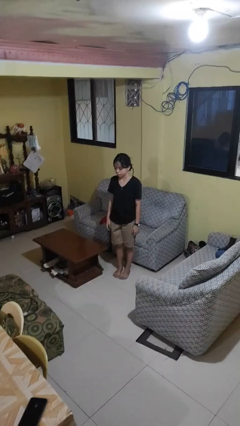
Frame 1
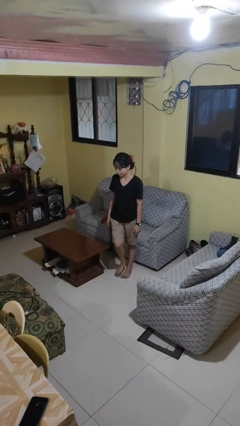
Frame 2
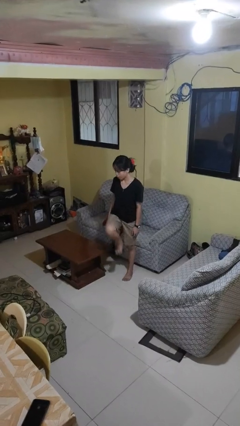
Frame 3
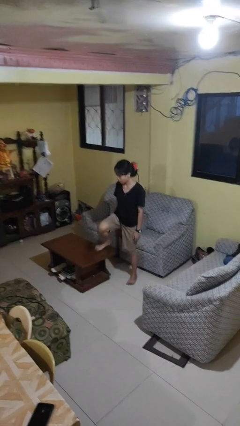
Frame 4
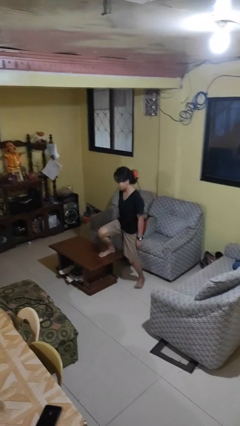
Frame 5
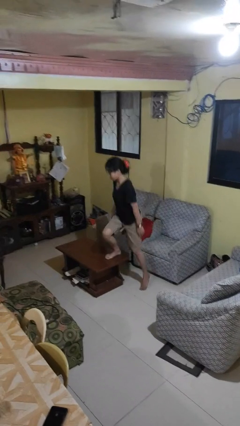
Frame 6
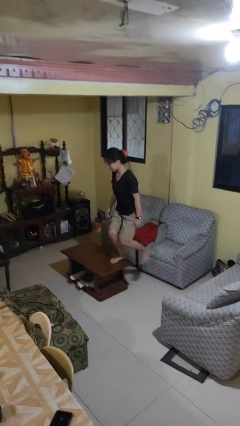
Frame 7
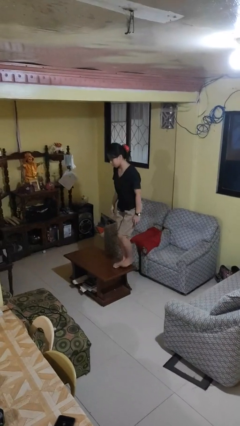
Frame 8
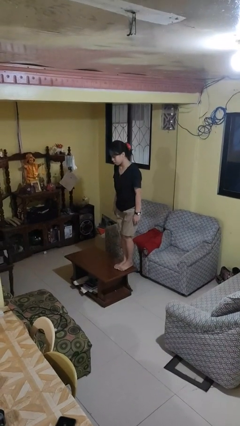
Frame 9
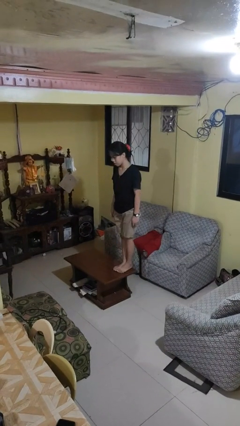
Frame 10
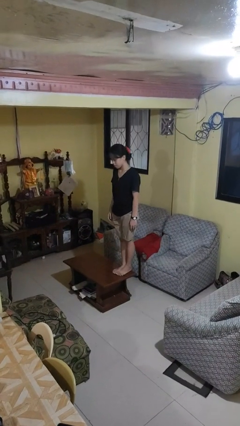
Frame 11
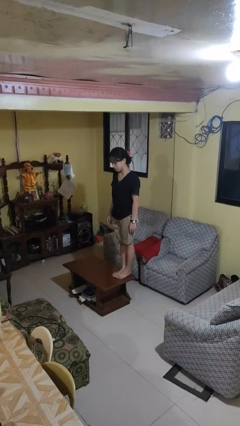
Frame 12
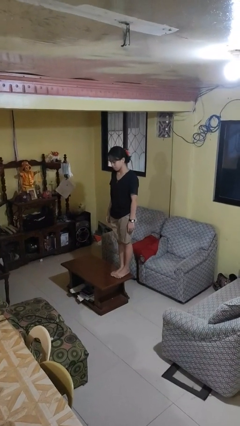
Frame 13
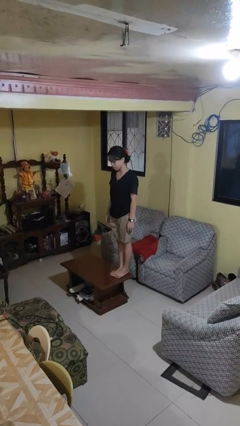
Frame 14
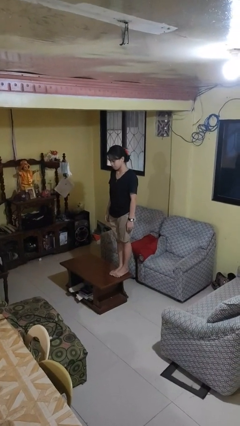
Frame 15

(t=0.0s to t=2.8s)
person climbs on table

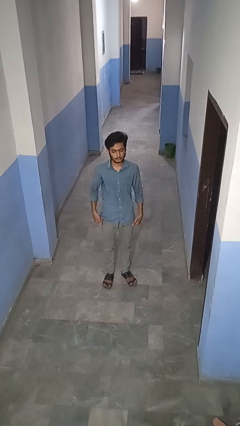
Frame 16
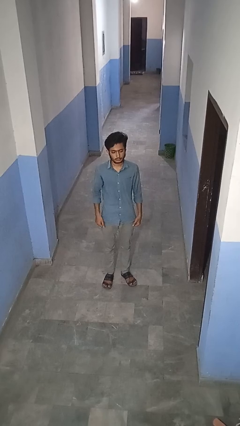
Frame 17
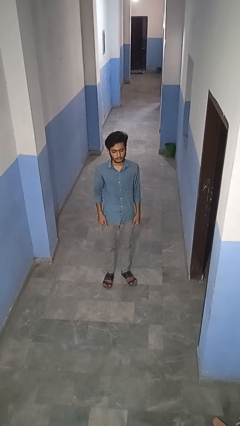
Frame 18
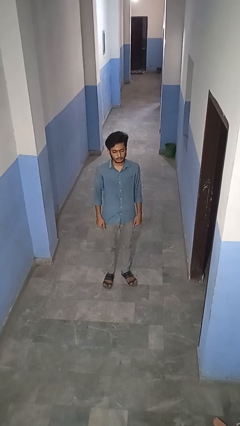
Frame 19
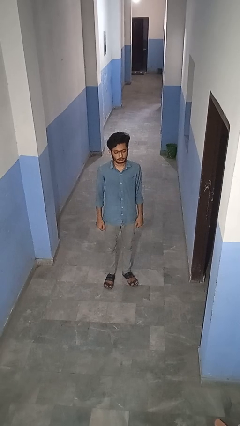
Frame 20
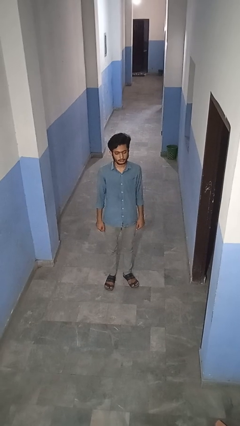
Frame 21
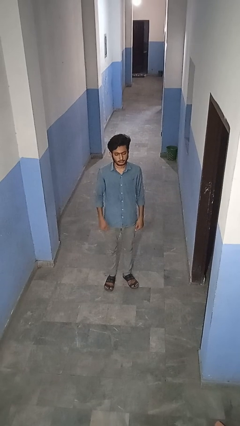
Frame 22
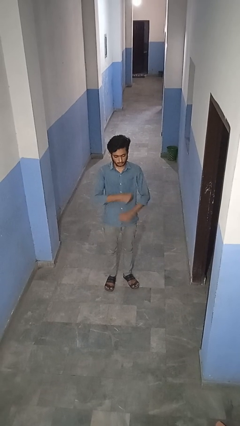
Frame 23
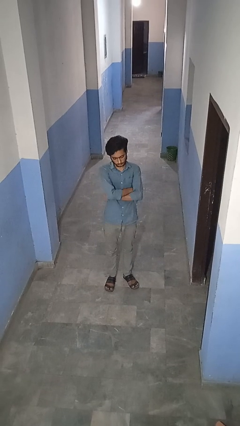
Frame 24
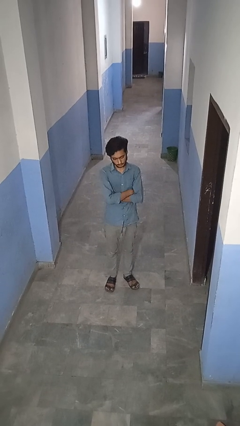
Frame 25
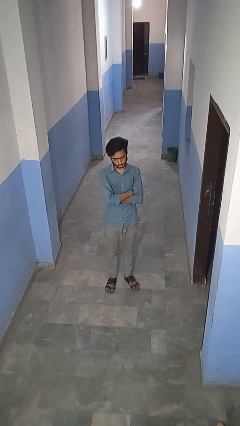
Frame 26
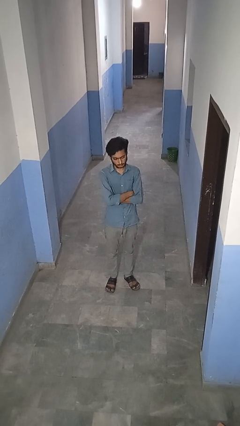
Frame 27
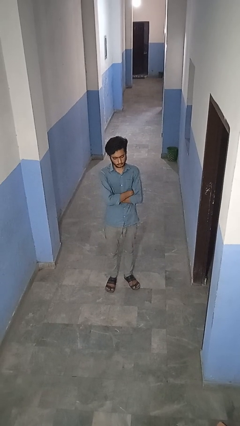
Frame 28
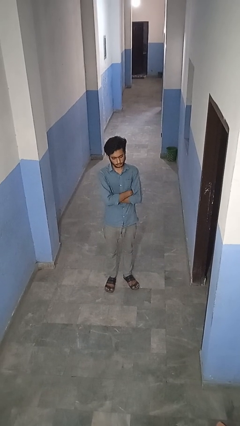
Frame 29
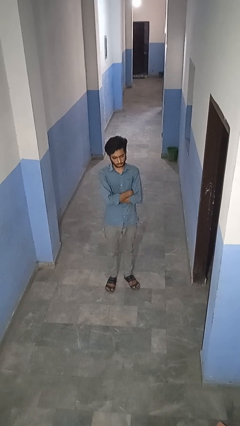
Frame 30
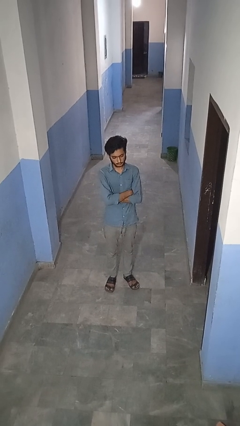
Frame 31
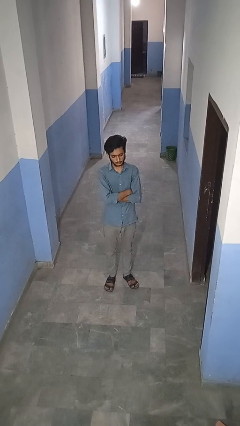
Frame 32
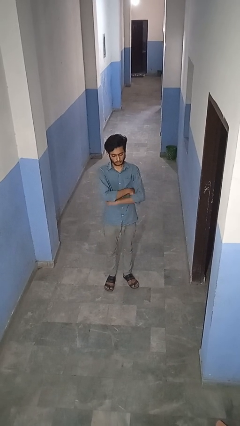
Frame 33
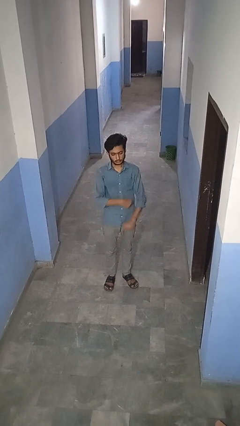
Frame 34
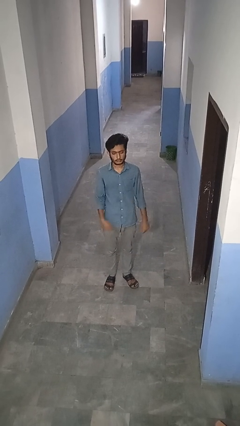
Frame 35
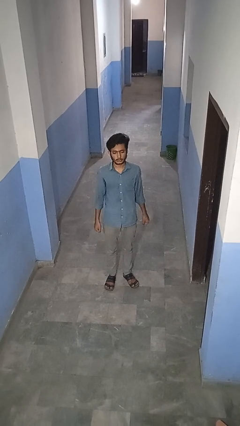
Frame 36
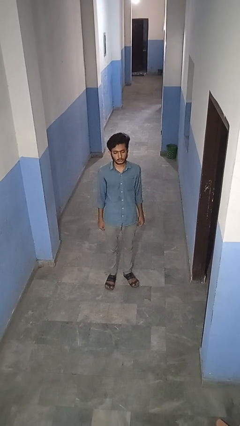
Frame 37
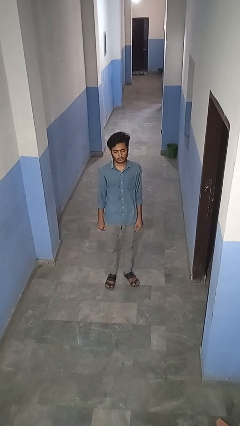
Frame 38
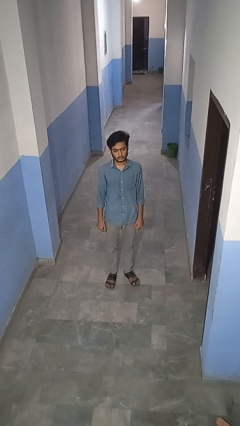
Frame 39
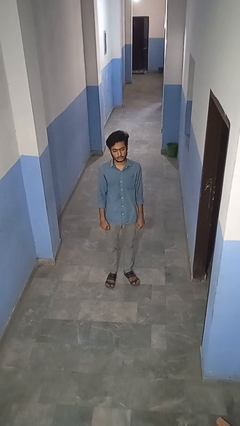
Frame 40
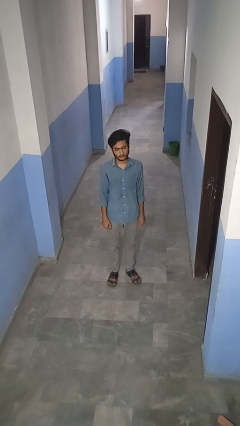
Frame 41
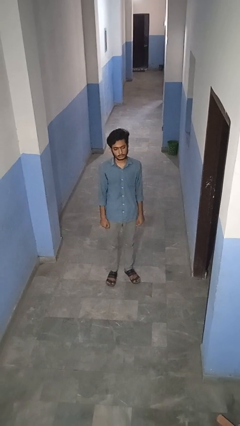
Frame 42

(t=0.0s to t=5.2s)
person crosses arms

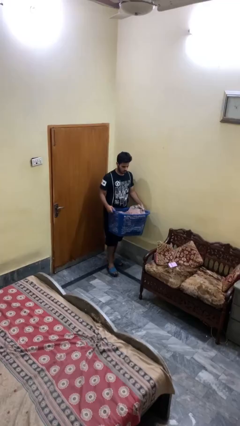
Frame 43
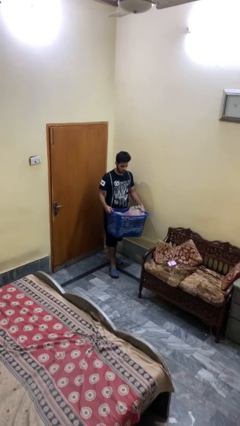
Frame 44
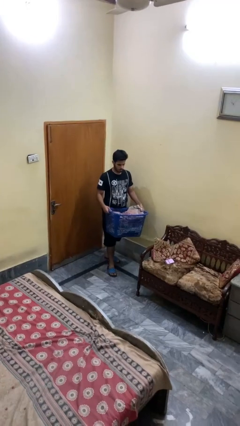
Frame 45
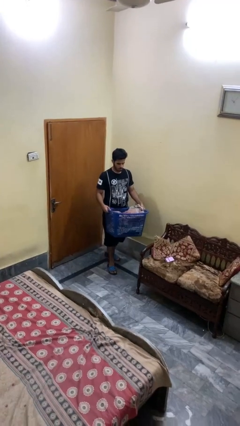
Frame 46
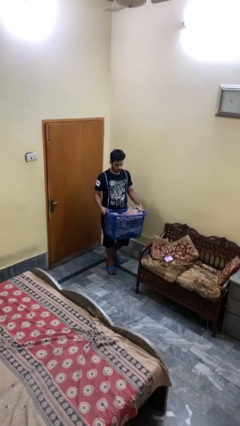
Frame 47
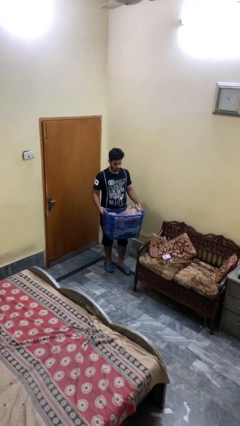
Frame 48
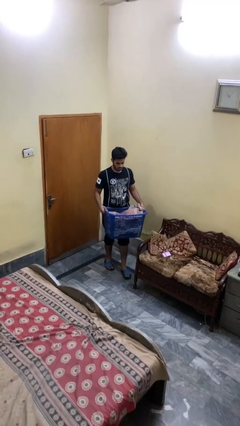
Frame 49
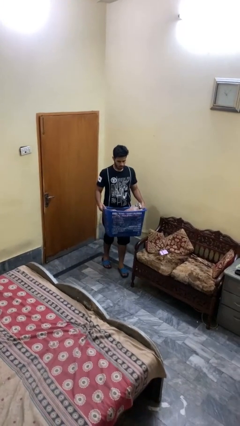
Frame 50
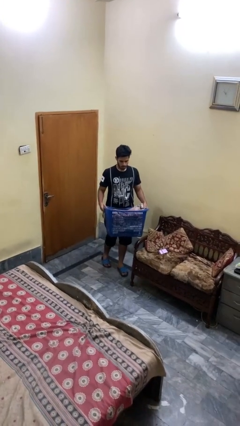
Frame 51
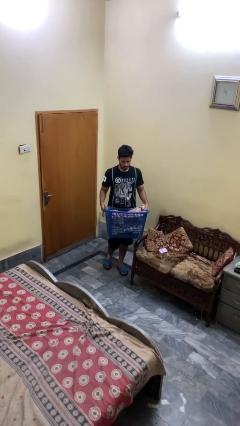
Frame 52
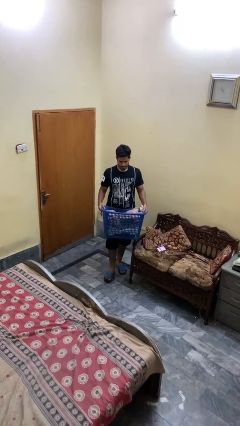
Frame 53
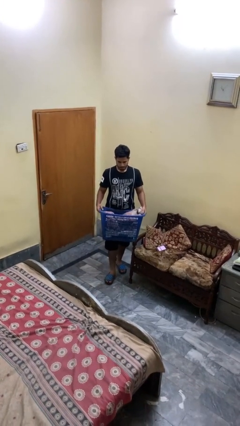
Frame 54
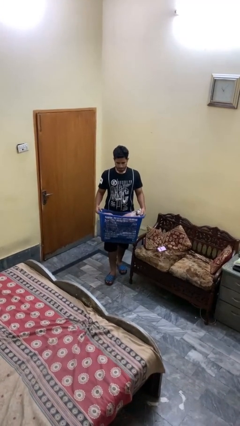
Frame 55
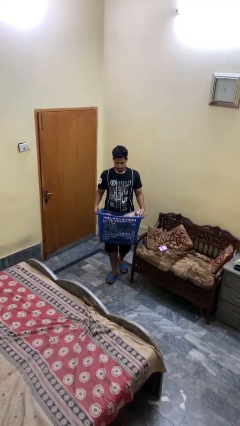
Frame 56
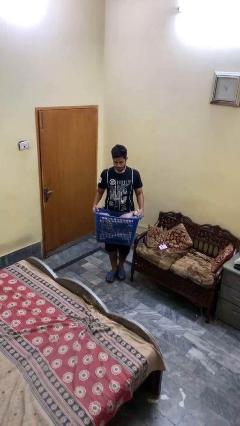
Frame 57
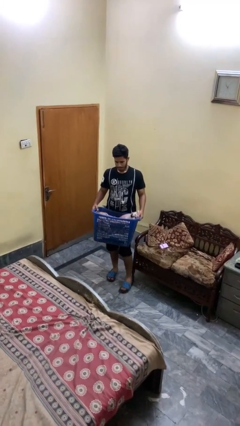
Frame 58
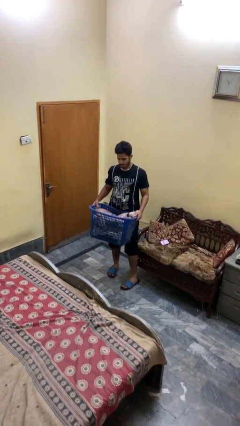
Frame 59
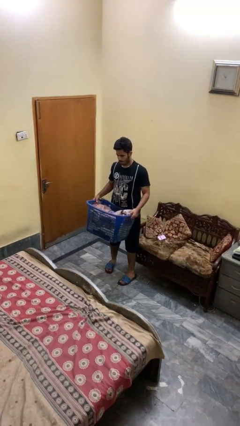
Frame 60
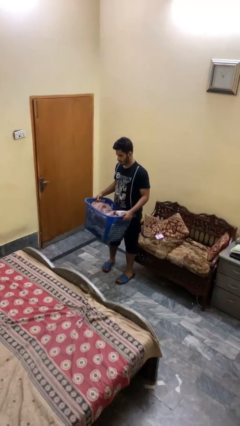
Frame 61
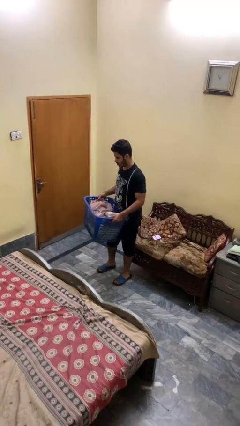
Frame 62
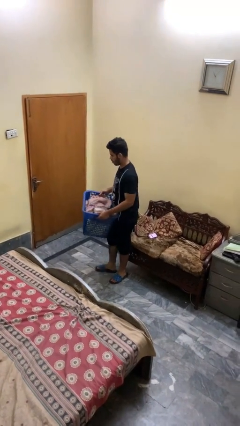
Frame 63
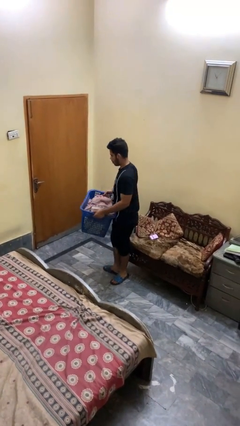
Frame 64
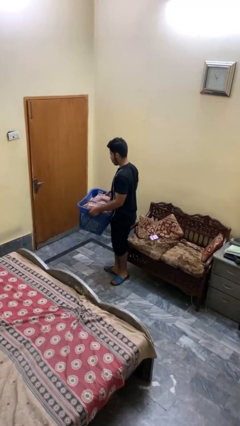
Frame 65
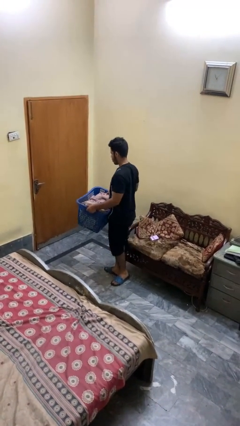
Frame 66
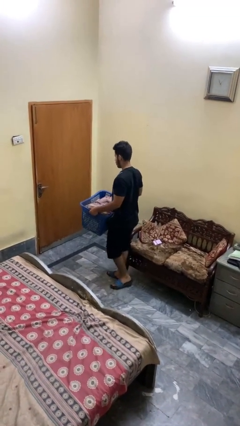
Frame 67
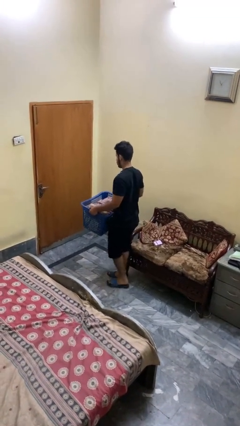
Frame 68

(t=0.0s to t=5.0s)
person carries laundry basket

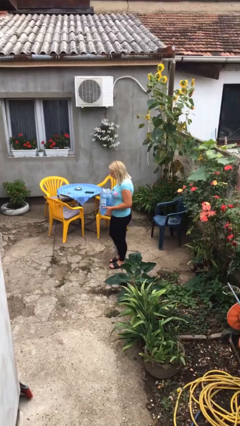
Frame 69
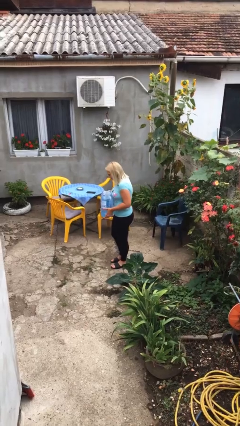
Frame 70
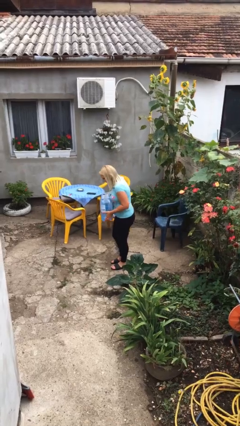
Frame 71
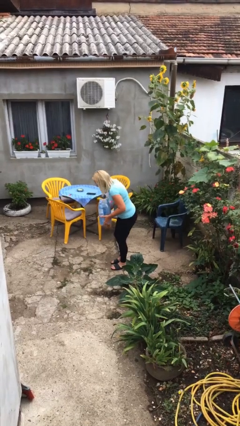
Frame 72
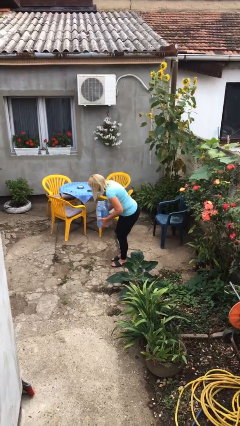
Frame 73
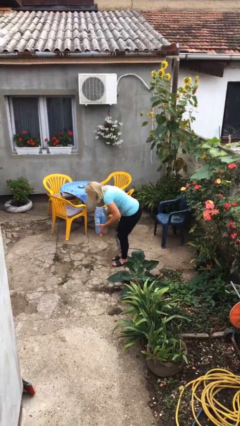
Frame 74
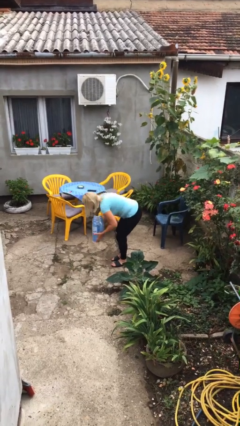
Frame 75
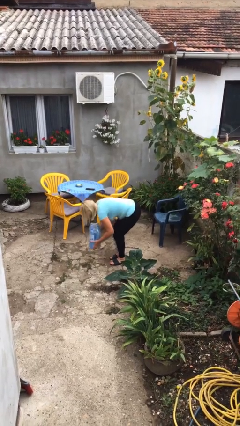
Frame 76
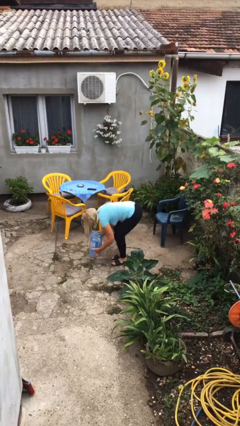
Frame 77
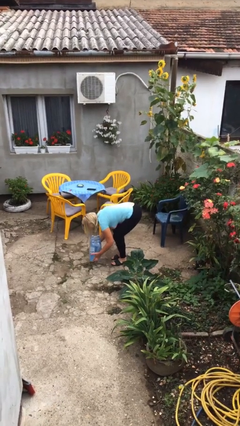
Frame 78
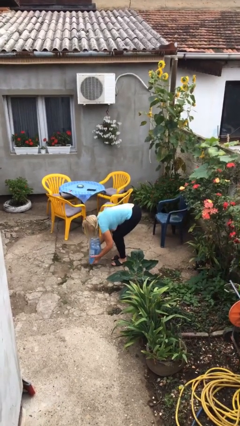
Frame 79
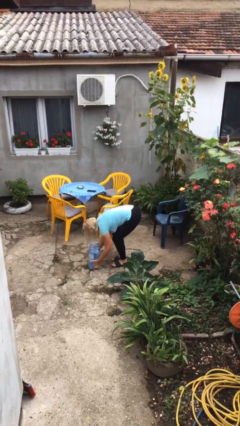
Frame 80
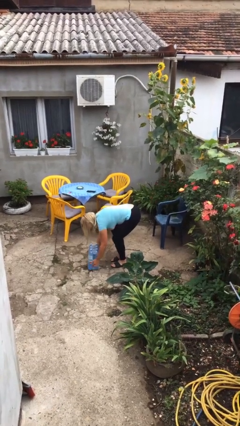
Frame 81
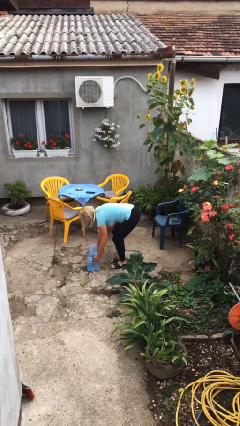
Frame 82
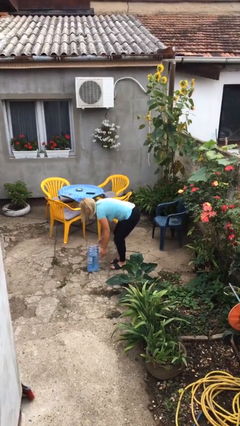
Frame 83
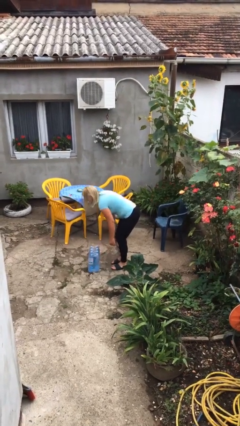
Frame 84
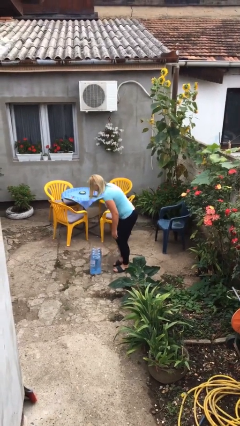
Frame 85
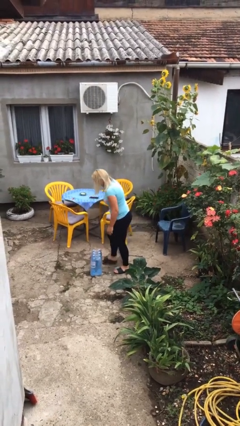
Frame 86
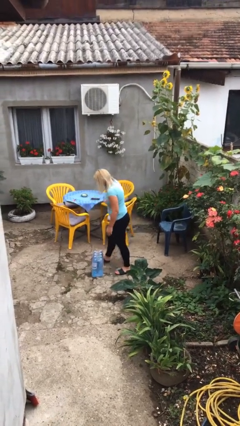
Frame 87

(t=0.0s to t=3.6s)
person puts down object on floor

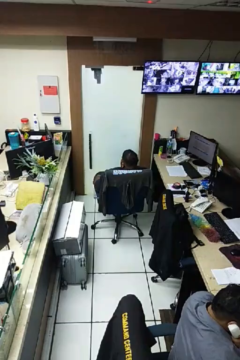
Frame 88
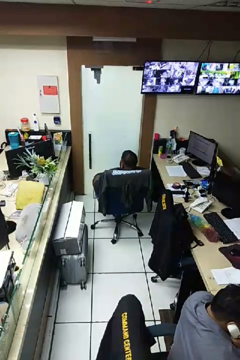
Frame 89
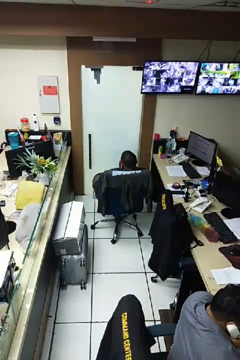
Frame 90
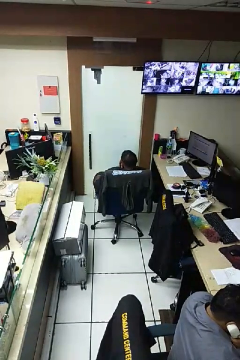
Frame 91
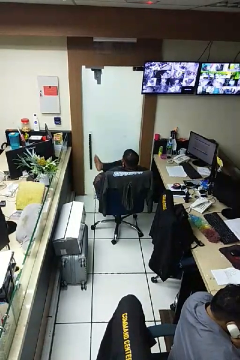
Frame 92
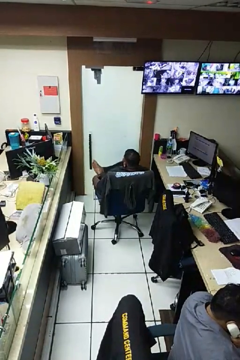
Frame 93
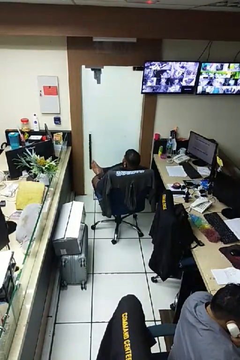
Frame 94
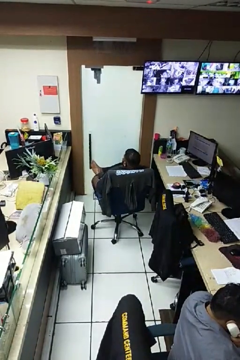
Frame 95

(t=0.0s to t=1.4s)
person crosses legs
